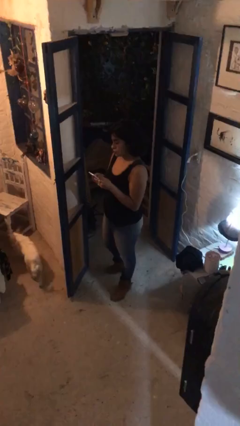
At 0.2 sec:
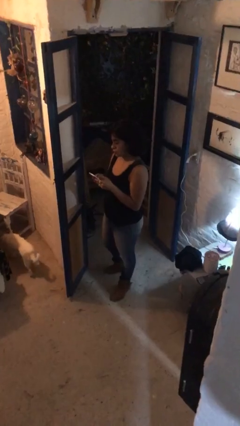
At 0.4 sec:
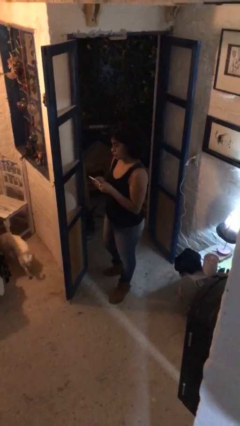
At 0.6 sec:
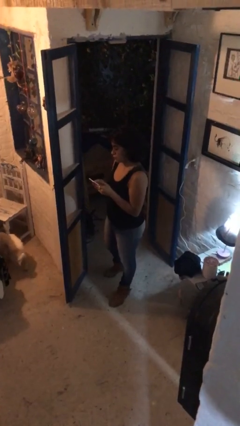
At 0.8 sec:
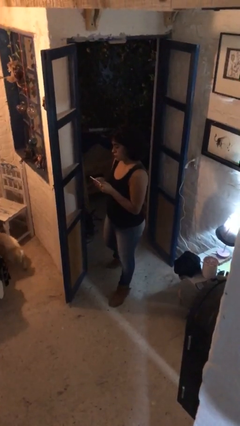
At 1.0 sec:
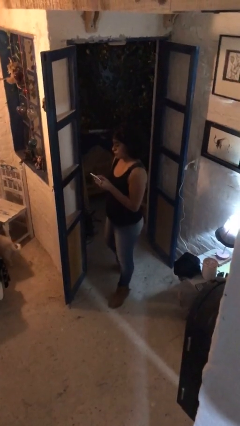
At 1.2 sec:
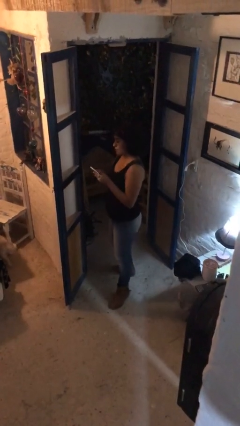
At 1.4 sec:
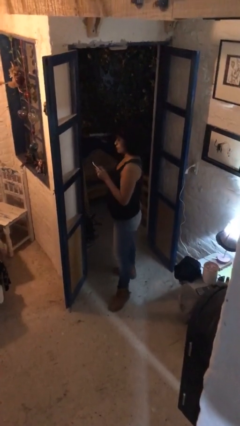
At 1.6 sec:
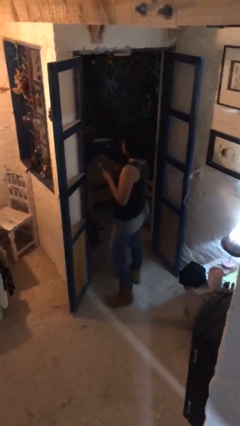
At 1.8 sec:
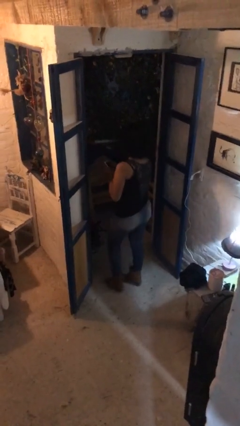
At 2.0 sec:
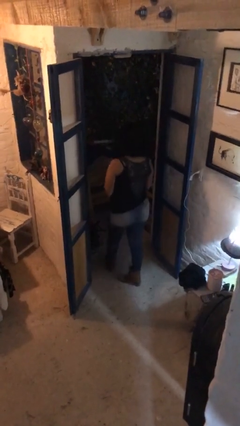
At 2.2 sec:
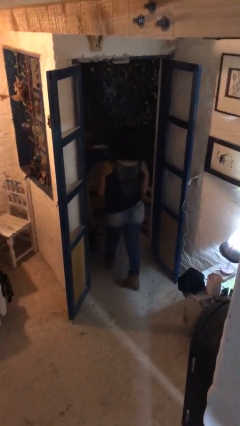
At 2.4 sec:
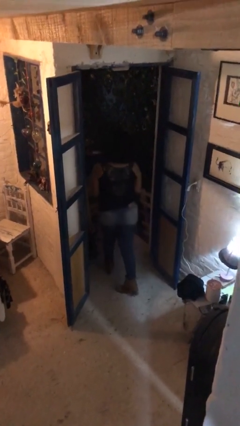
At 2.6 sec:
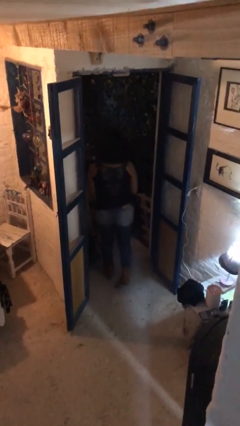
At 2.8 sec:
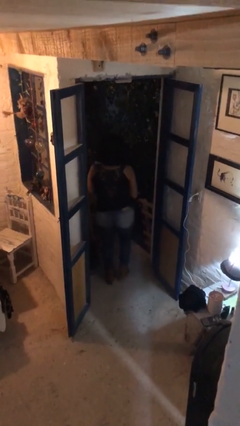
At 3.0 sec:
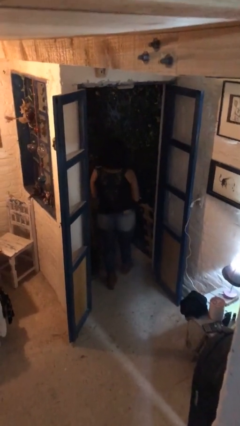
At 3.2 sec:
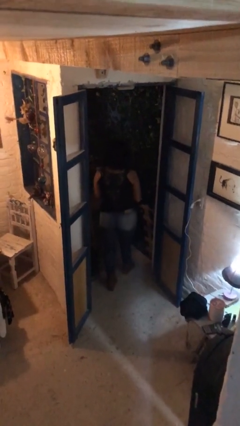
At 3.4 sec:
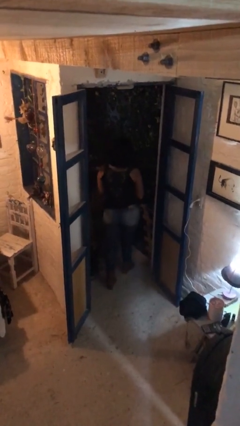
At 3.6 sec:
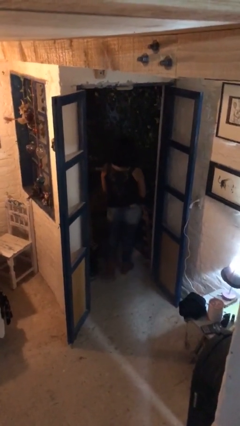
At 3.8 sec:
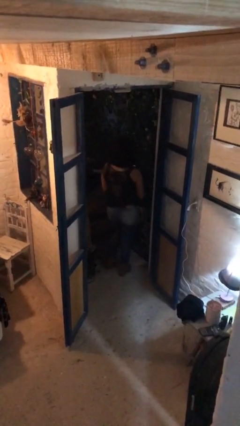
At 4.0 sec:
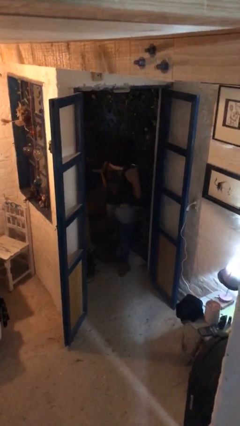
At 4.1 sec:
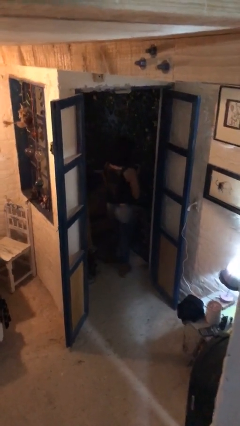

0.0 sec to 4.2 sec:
person exits scene through structure

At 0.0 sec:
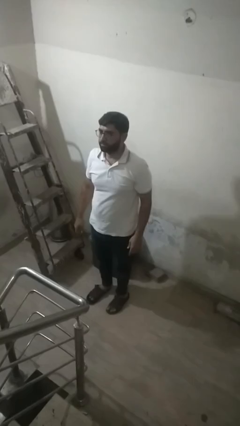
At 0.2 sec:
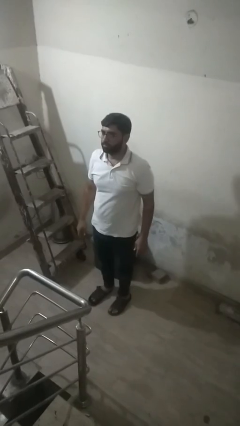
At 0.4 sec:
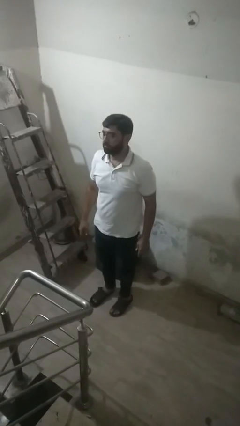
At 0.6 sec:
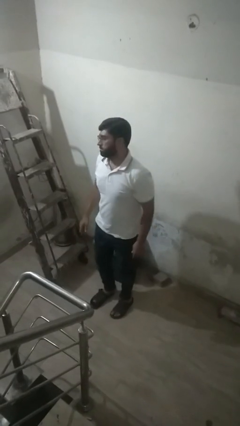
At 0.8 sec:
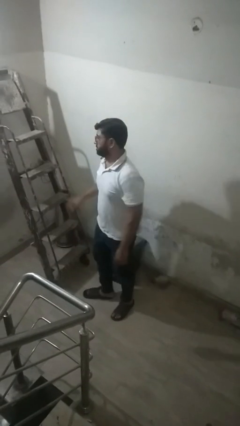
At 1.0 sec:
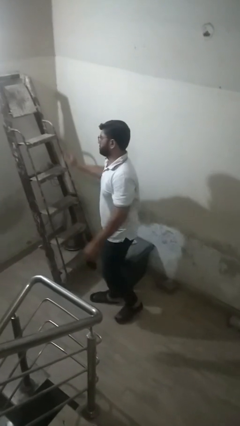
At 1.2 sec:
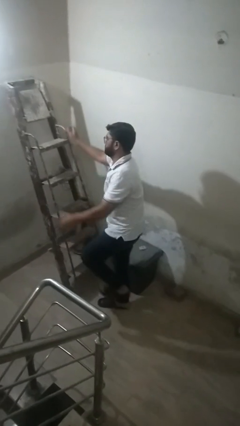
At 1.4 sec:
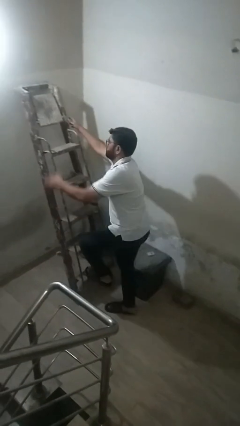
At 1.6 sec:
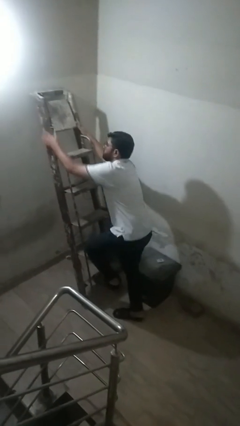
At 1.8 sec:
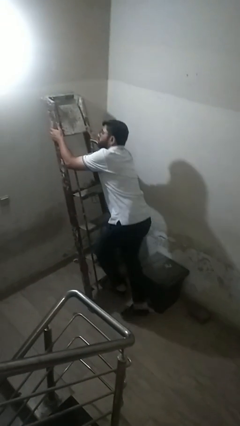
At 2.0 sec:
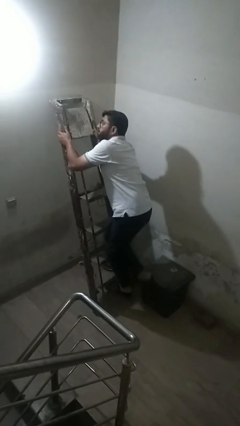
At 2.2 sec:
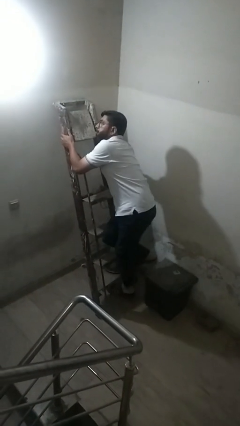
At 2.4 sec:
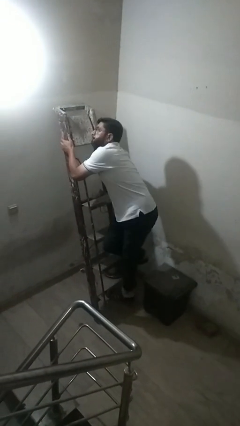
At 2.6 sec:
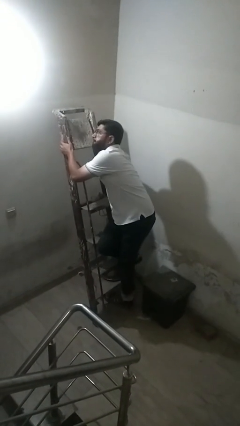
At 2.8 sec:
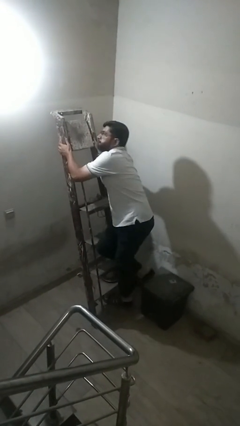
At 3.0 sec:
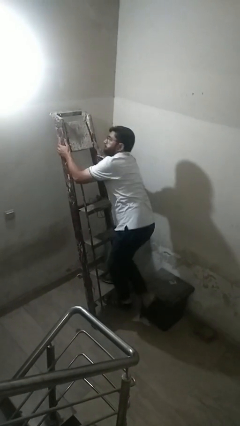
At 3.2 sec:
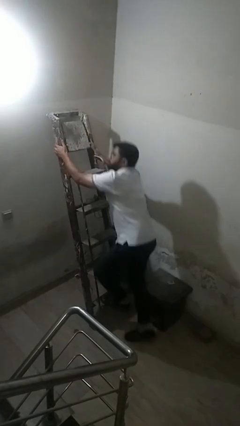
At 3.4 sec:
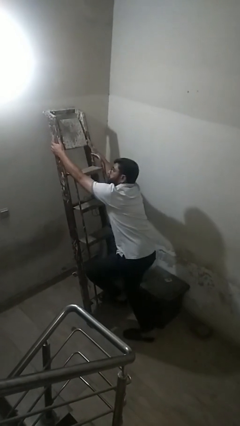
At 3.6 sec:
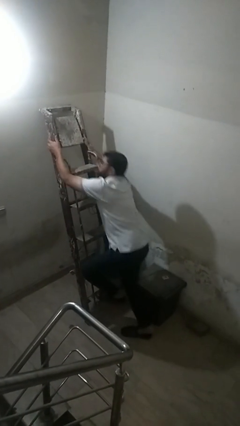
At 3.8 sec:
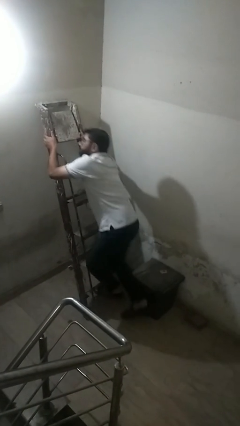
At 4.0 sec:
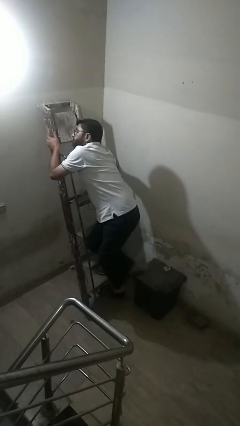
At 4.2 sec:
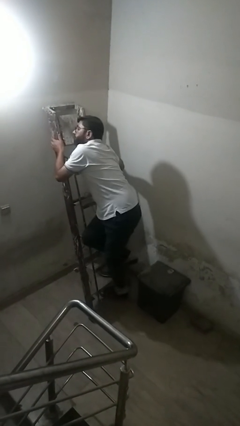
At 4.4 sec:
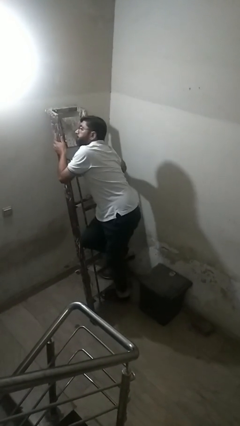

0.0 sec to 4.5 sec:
person climbs up ladder

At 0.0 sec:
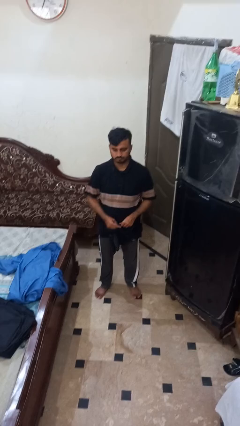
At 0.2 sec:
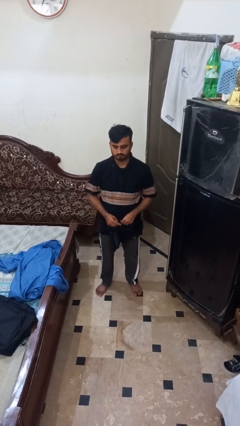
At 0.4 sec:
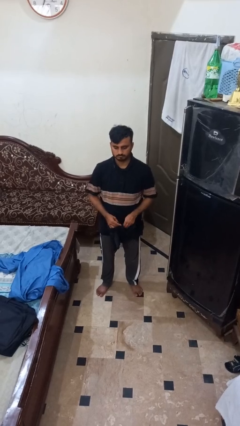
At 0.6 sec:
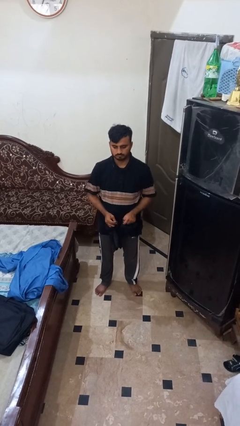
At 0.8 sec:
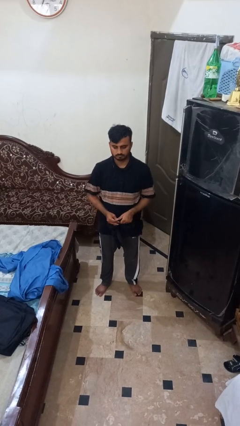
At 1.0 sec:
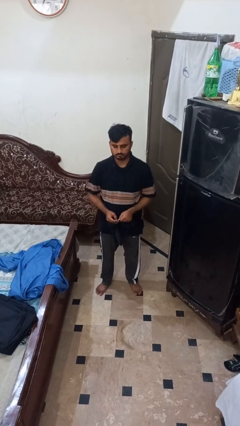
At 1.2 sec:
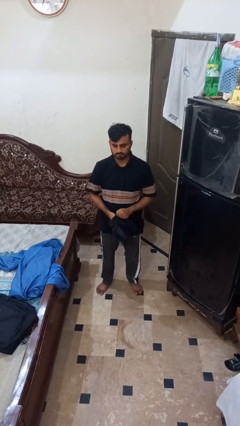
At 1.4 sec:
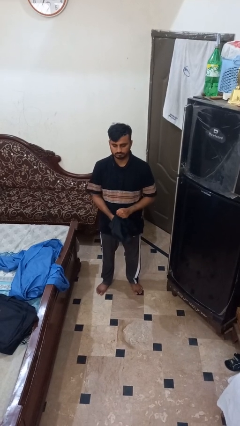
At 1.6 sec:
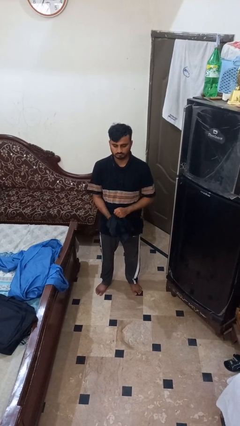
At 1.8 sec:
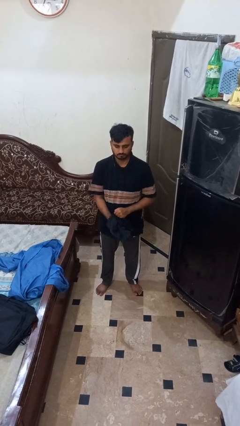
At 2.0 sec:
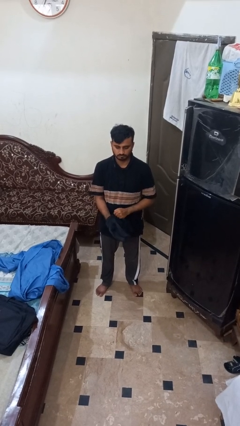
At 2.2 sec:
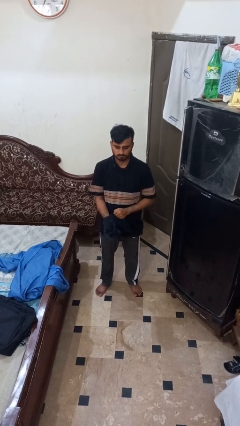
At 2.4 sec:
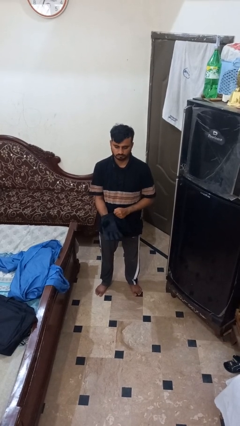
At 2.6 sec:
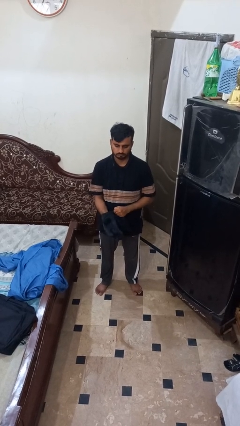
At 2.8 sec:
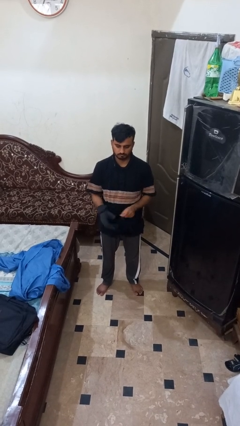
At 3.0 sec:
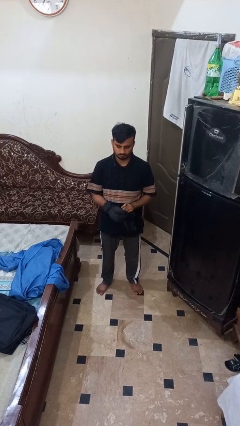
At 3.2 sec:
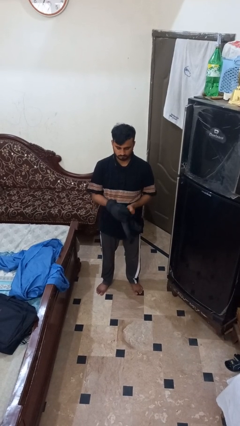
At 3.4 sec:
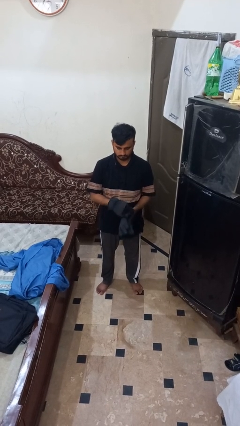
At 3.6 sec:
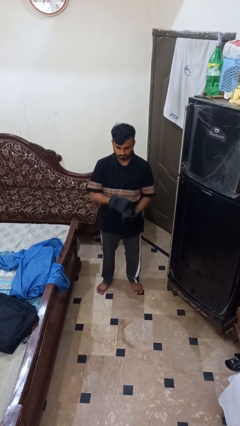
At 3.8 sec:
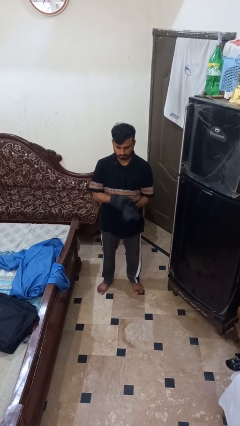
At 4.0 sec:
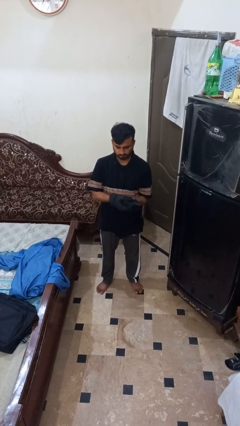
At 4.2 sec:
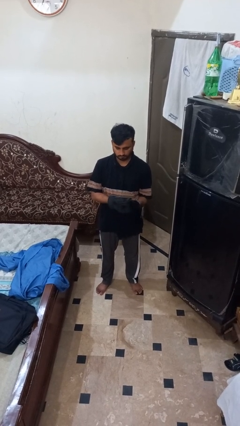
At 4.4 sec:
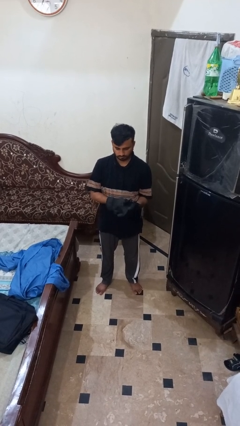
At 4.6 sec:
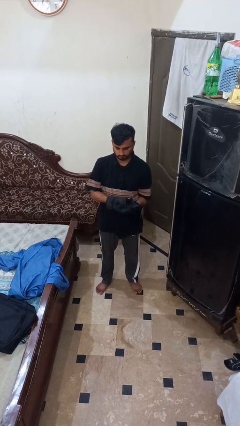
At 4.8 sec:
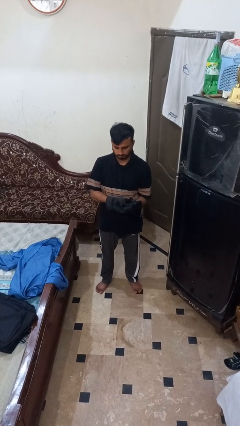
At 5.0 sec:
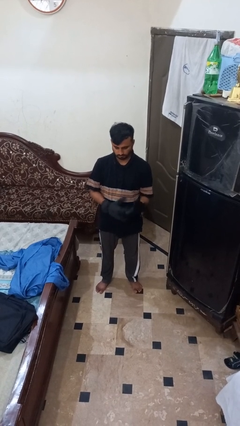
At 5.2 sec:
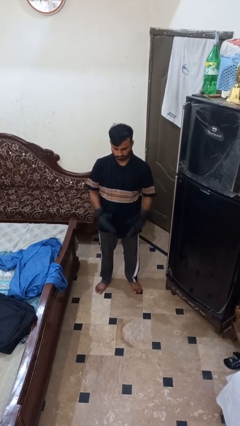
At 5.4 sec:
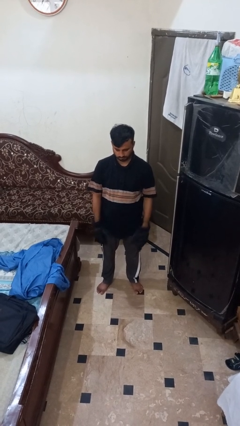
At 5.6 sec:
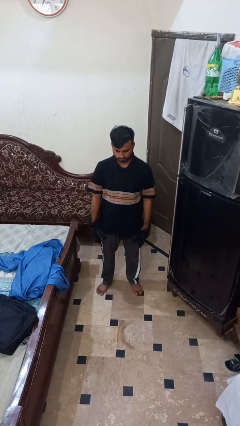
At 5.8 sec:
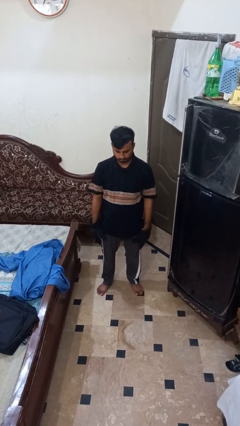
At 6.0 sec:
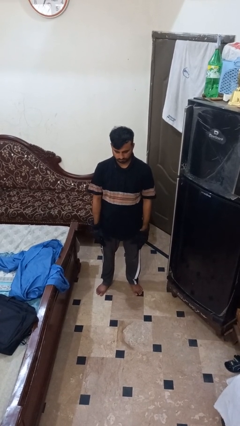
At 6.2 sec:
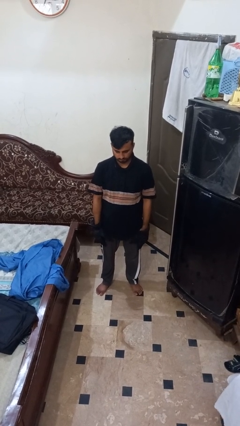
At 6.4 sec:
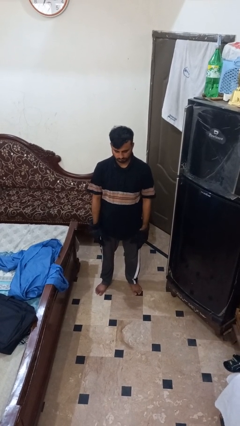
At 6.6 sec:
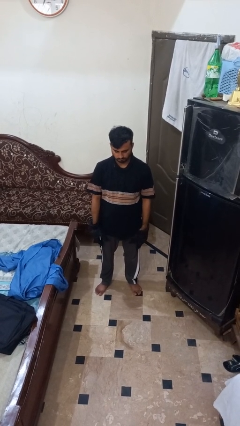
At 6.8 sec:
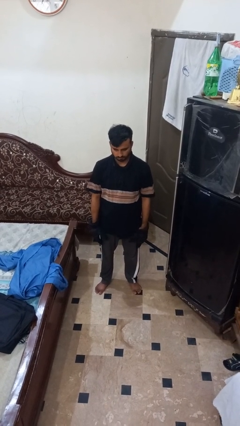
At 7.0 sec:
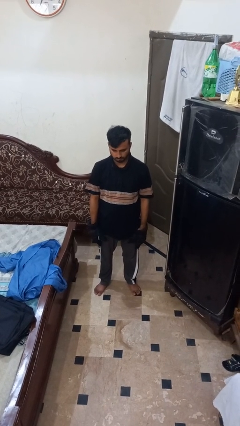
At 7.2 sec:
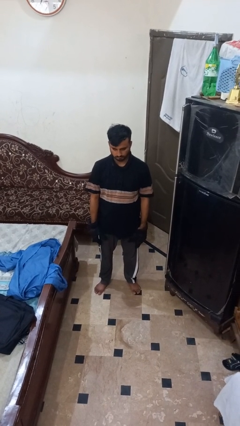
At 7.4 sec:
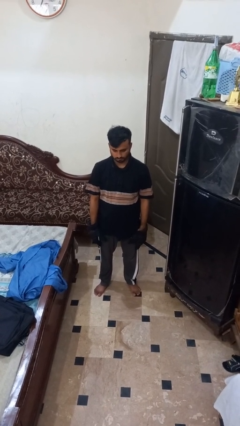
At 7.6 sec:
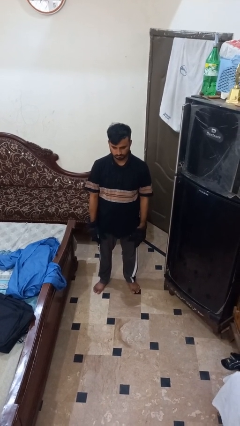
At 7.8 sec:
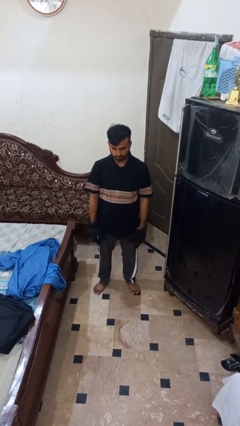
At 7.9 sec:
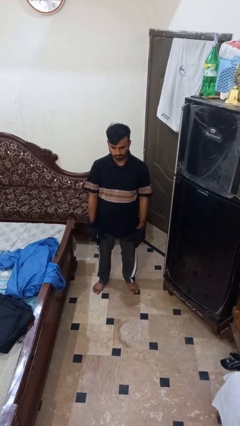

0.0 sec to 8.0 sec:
person puts on gloves

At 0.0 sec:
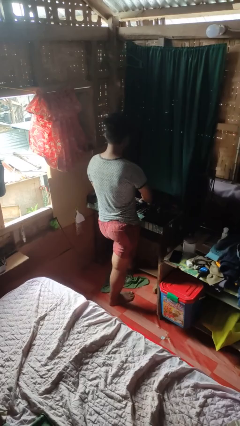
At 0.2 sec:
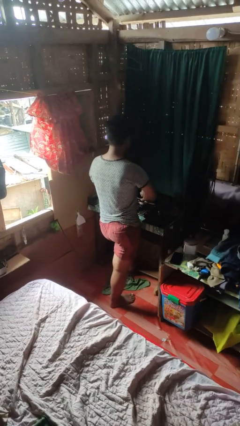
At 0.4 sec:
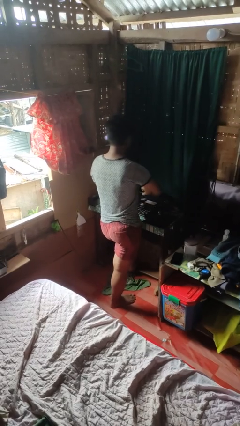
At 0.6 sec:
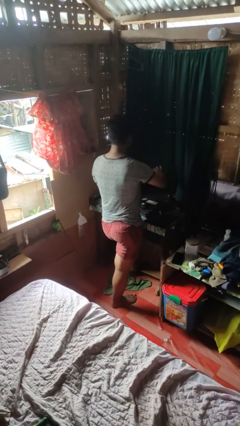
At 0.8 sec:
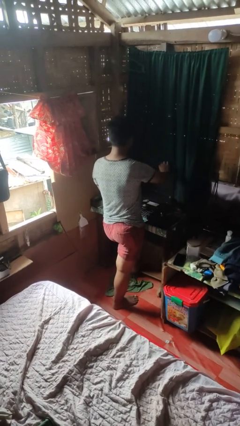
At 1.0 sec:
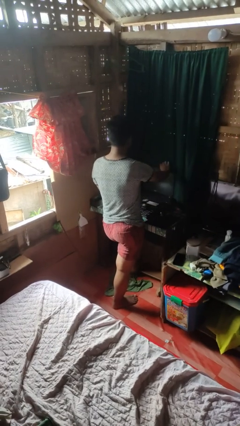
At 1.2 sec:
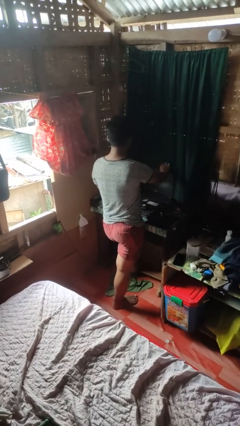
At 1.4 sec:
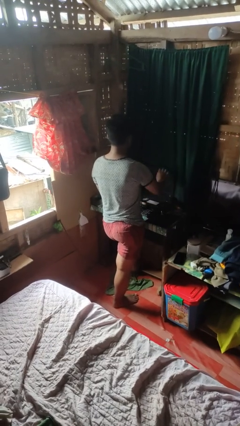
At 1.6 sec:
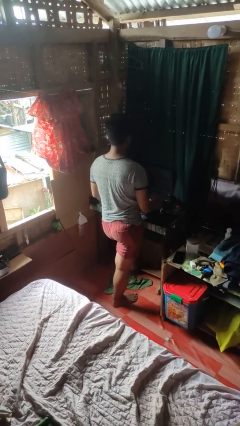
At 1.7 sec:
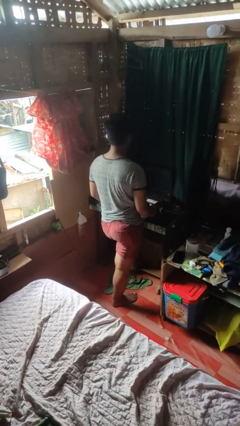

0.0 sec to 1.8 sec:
person opens laptop
